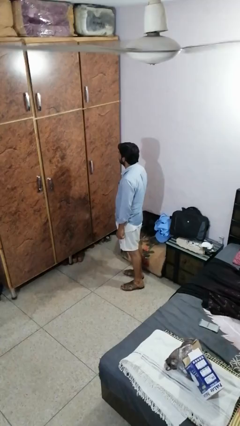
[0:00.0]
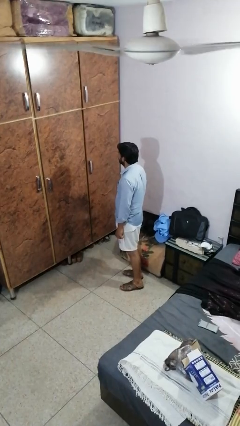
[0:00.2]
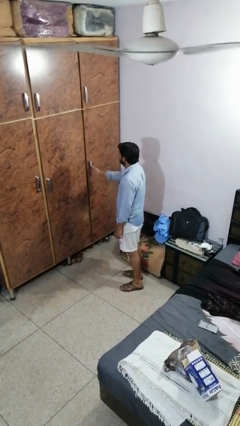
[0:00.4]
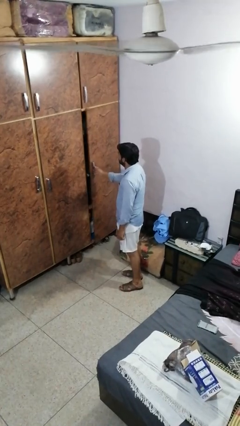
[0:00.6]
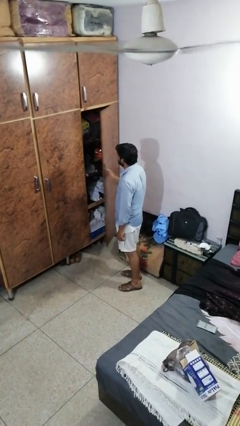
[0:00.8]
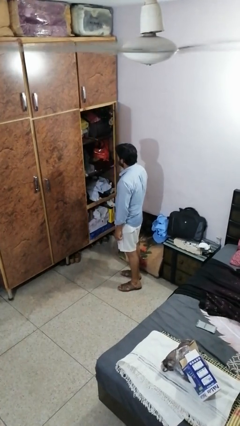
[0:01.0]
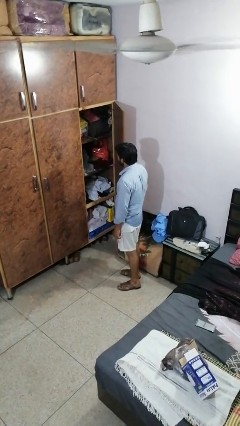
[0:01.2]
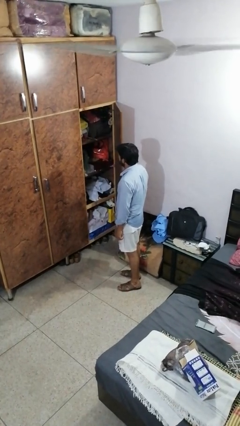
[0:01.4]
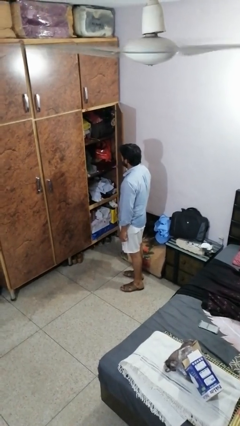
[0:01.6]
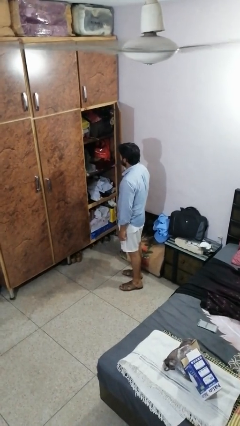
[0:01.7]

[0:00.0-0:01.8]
person opens closet door

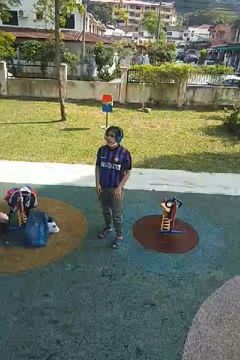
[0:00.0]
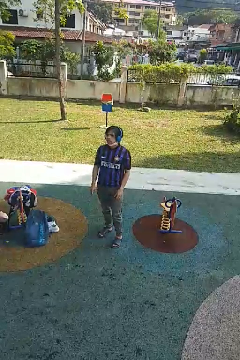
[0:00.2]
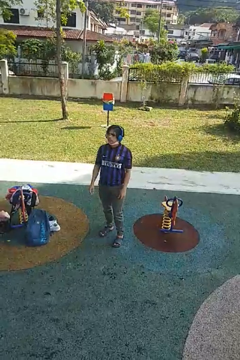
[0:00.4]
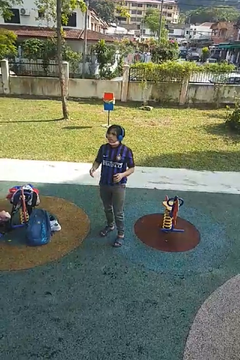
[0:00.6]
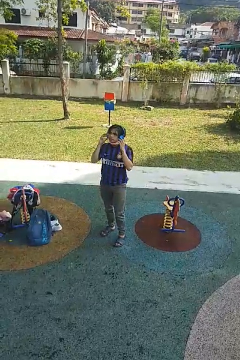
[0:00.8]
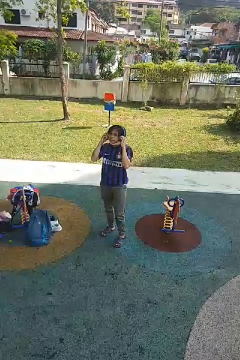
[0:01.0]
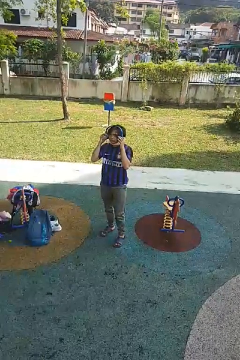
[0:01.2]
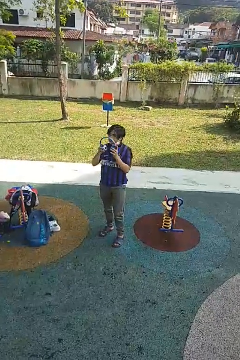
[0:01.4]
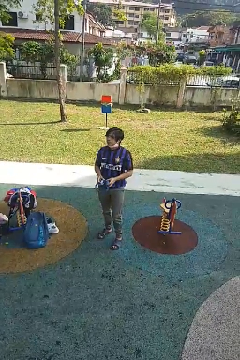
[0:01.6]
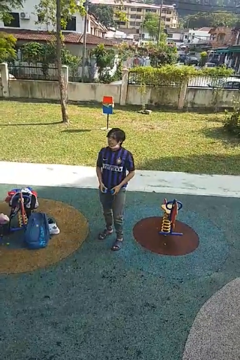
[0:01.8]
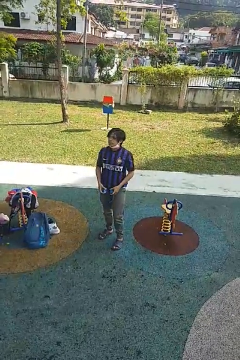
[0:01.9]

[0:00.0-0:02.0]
person takes off headphones

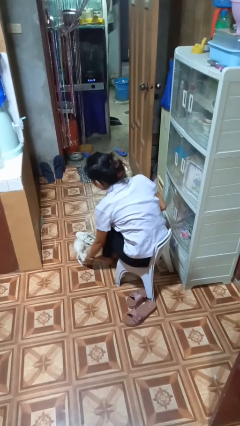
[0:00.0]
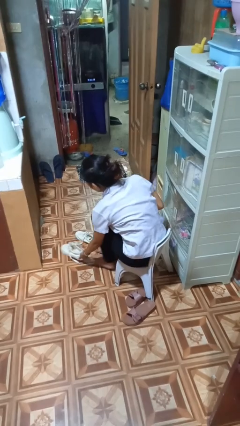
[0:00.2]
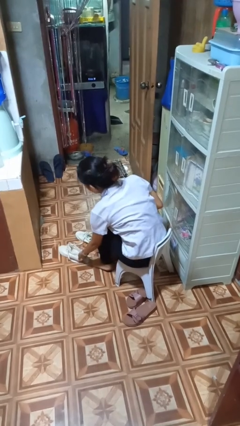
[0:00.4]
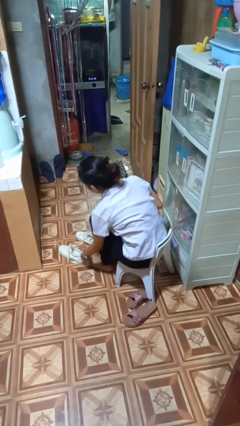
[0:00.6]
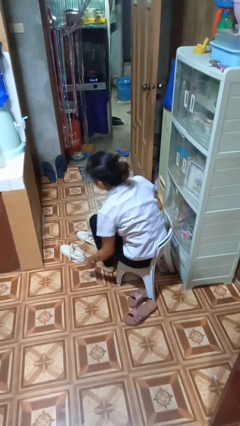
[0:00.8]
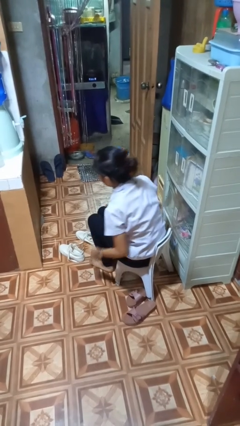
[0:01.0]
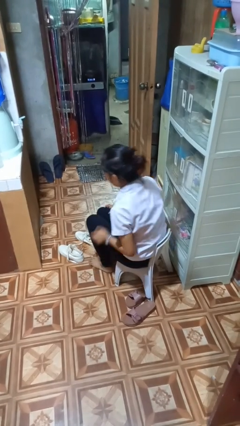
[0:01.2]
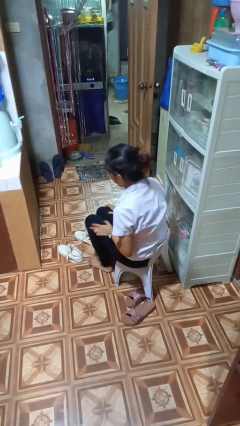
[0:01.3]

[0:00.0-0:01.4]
person takes off shoes

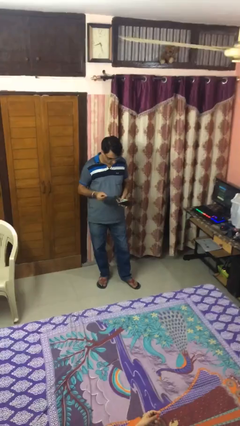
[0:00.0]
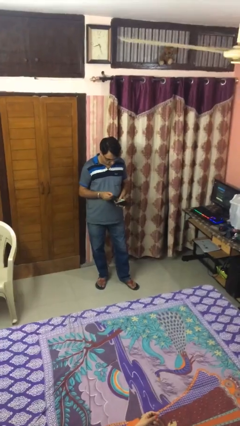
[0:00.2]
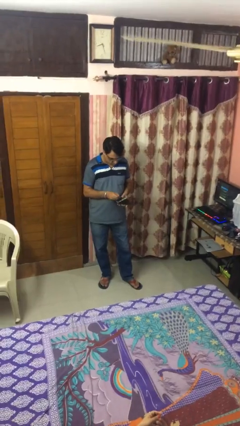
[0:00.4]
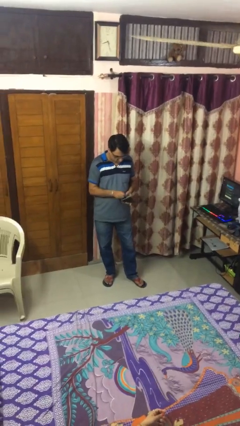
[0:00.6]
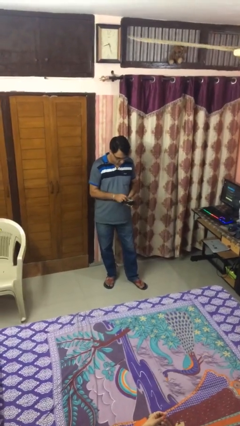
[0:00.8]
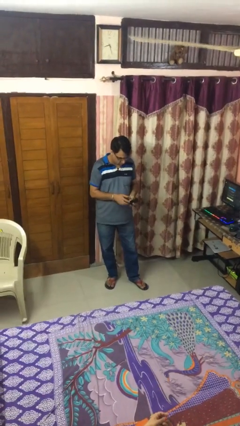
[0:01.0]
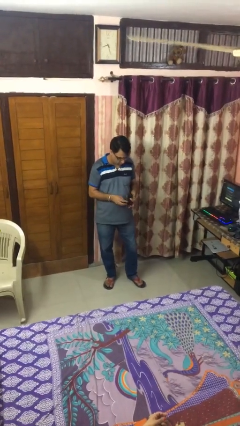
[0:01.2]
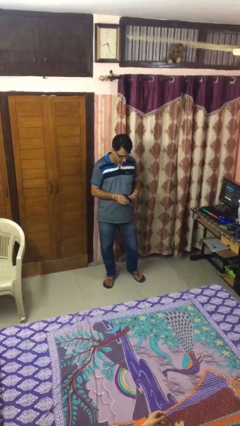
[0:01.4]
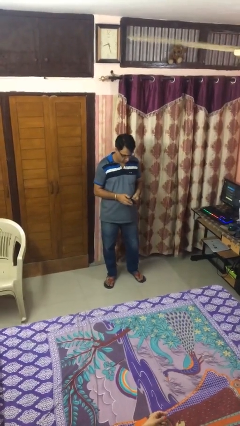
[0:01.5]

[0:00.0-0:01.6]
person puts object into purse

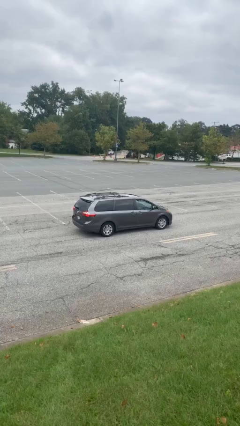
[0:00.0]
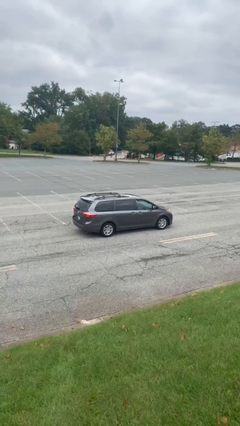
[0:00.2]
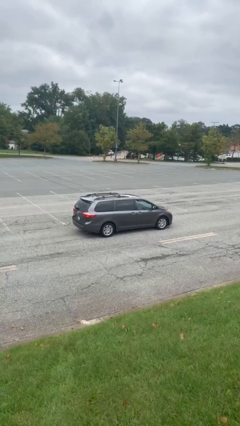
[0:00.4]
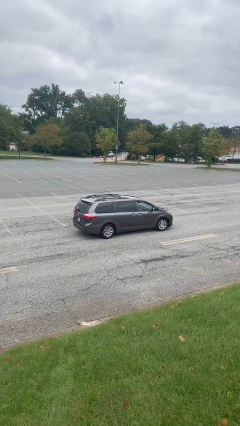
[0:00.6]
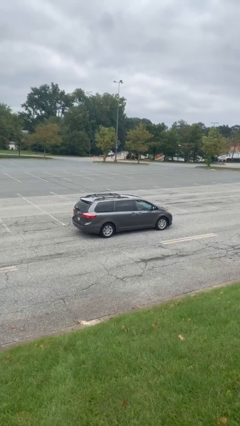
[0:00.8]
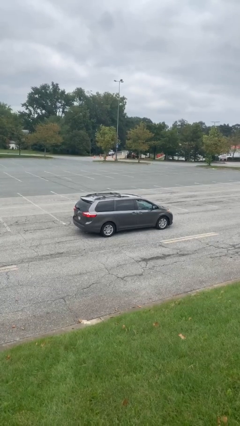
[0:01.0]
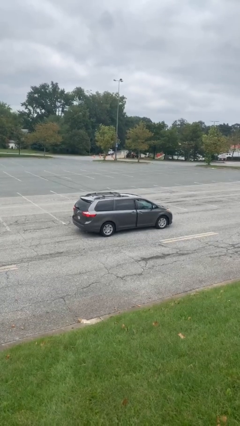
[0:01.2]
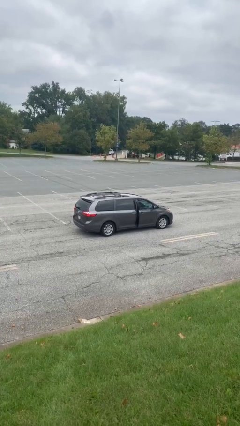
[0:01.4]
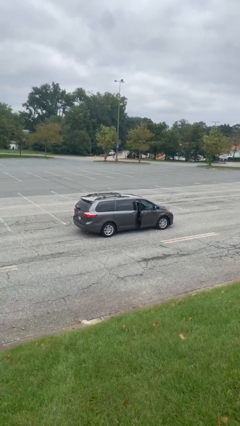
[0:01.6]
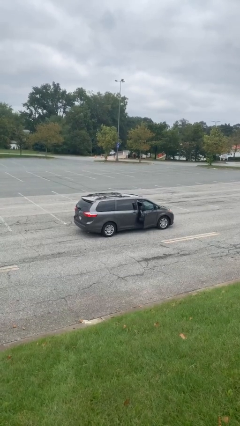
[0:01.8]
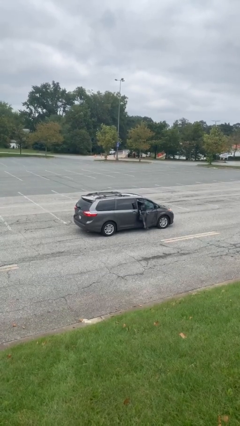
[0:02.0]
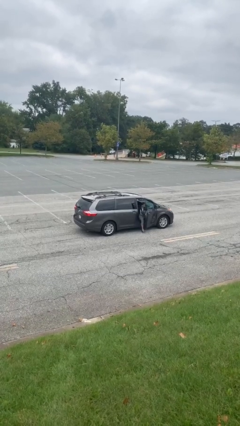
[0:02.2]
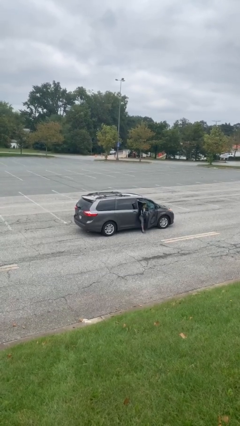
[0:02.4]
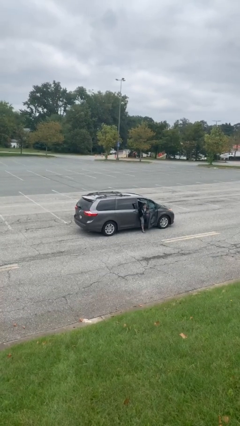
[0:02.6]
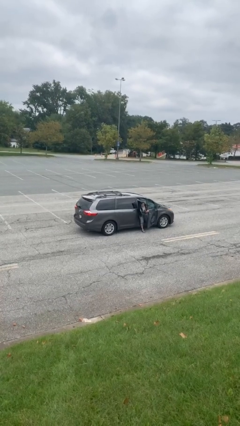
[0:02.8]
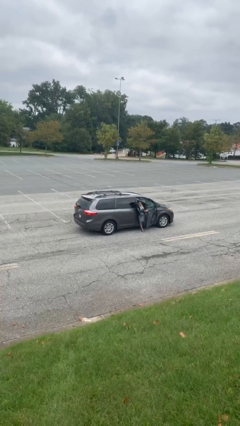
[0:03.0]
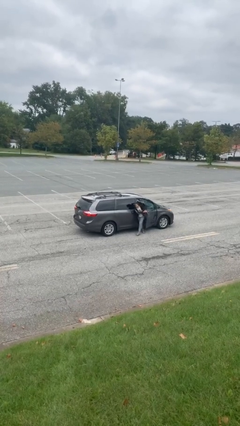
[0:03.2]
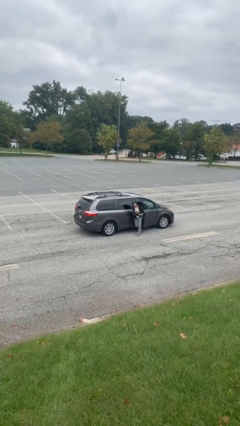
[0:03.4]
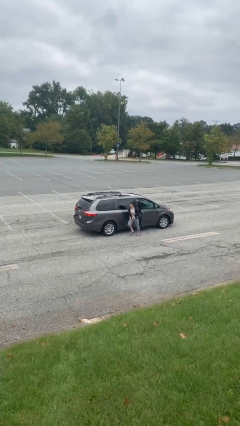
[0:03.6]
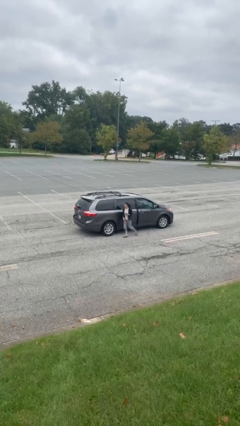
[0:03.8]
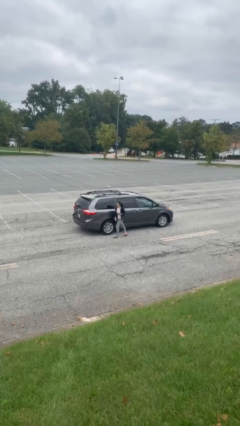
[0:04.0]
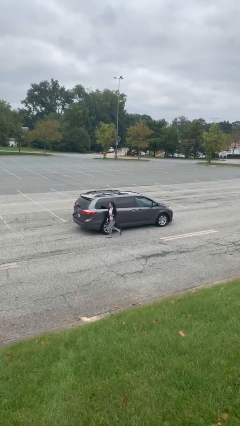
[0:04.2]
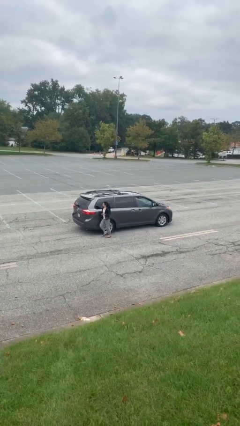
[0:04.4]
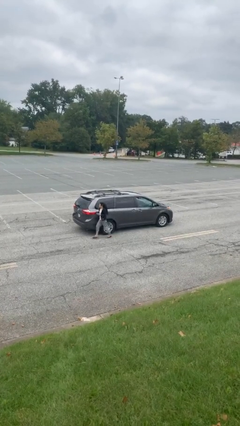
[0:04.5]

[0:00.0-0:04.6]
car drops off person

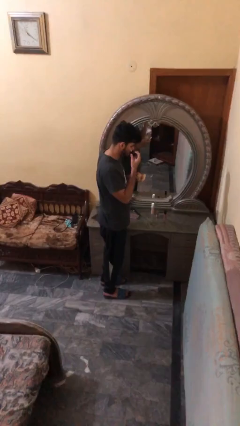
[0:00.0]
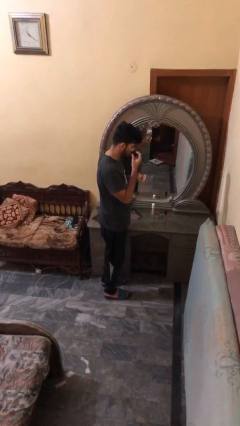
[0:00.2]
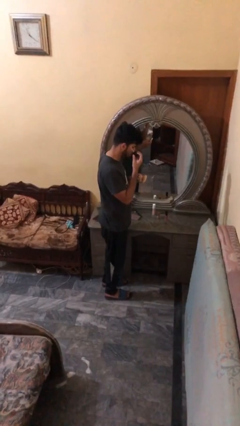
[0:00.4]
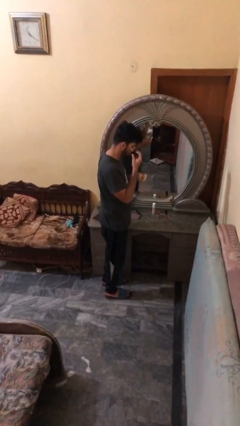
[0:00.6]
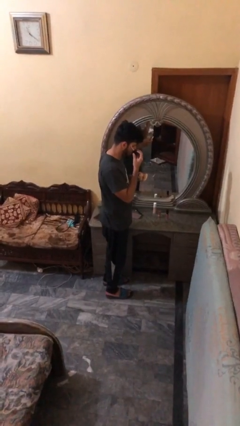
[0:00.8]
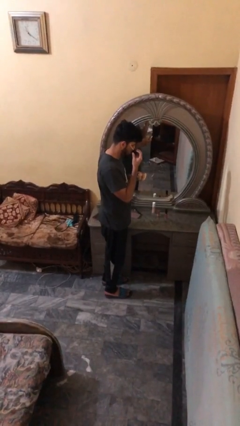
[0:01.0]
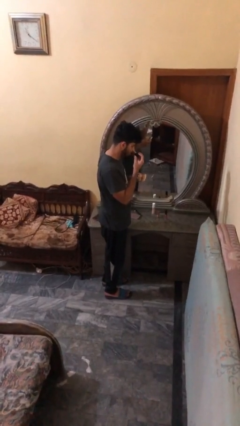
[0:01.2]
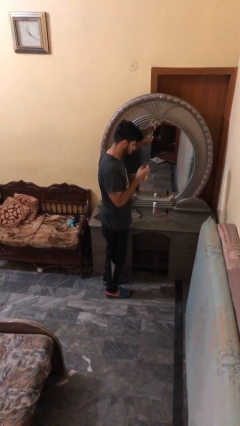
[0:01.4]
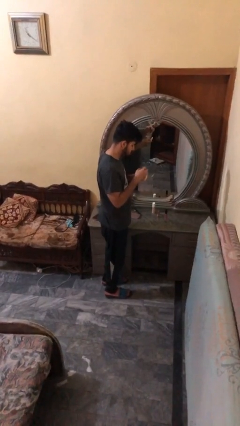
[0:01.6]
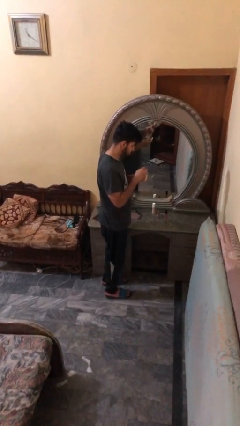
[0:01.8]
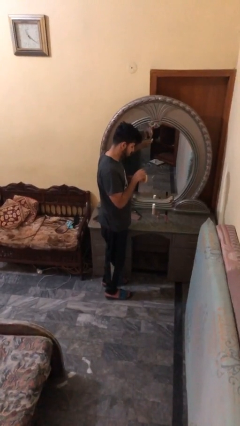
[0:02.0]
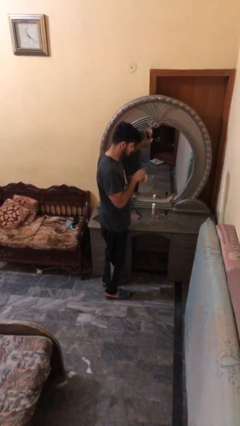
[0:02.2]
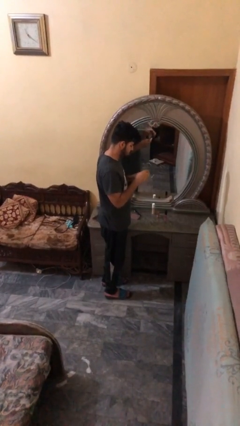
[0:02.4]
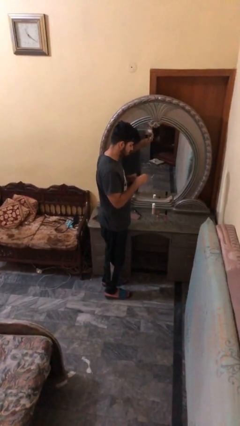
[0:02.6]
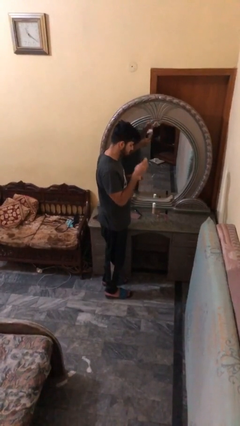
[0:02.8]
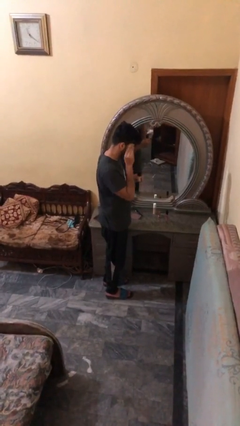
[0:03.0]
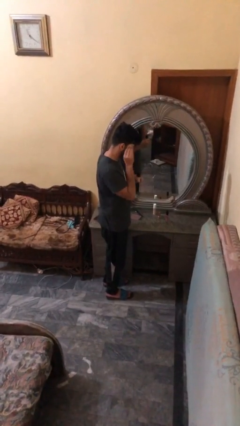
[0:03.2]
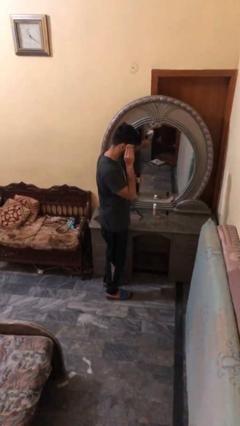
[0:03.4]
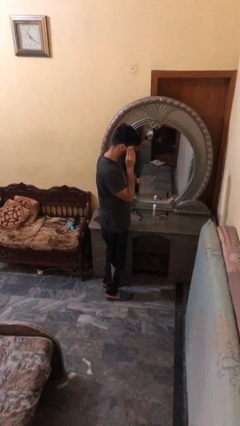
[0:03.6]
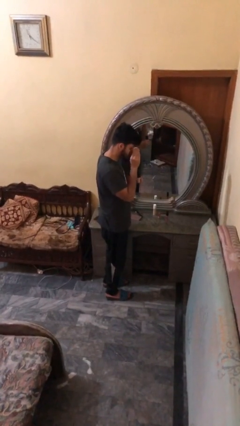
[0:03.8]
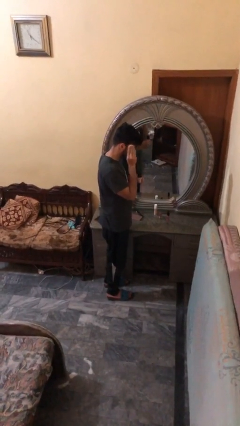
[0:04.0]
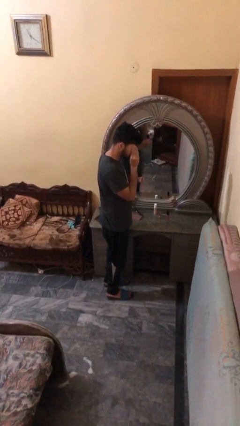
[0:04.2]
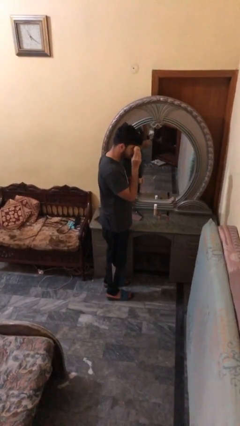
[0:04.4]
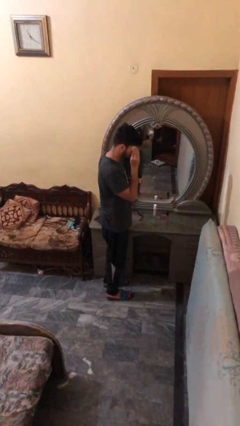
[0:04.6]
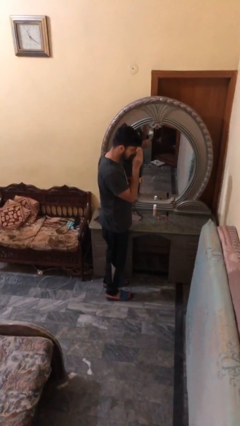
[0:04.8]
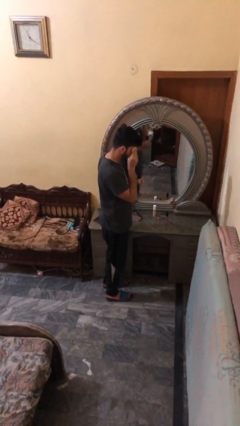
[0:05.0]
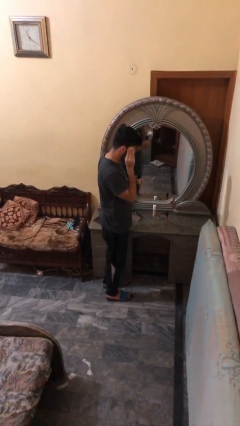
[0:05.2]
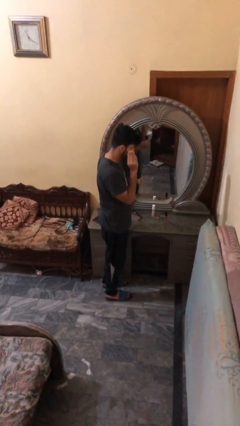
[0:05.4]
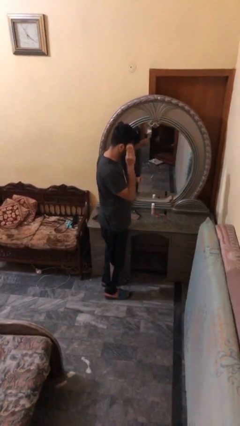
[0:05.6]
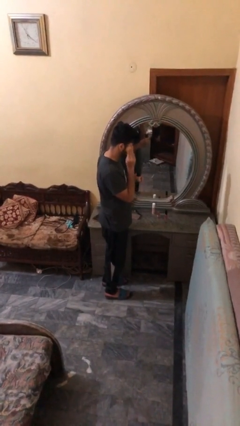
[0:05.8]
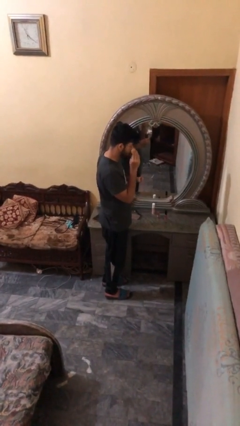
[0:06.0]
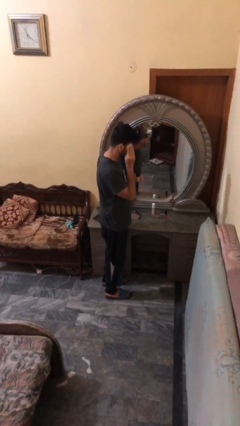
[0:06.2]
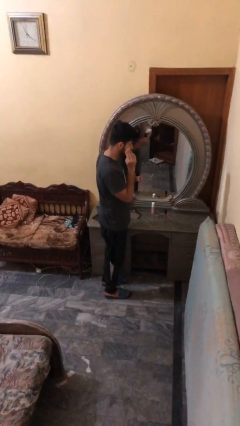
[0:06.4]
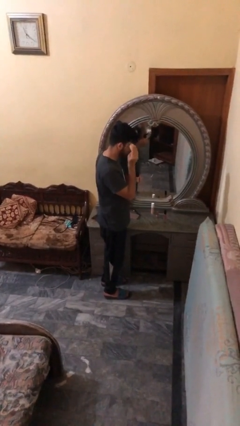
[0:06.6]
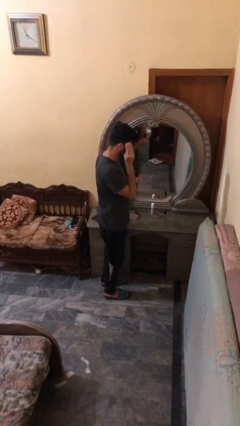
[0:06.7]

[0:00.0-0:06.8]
person applies foundation makeup
